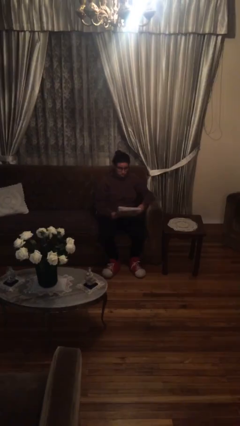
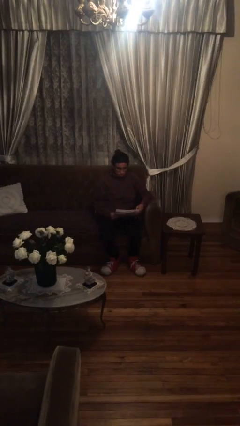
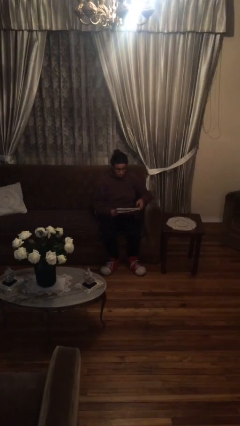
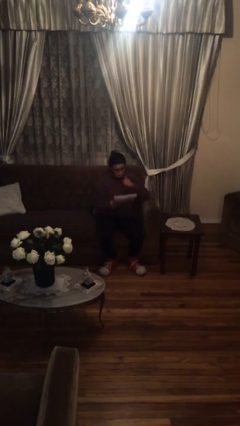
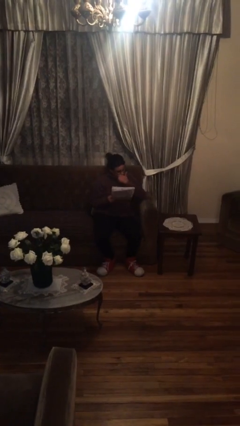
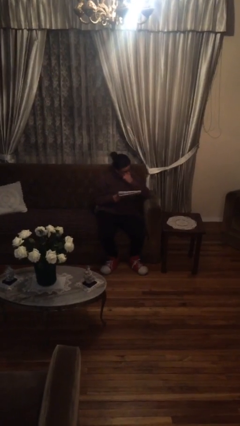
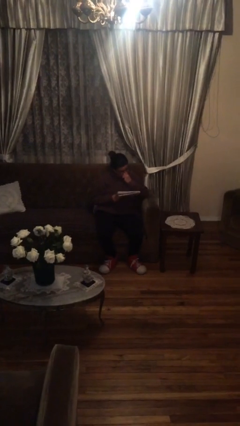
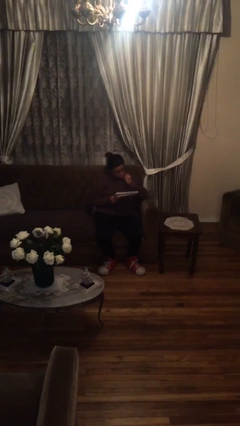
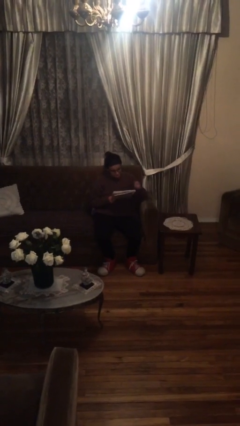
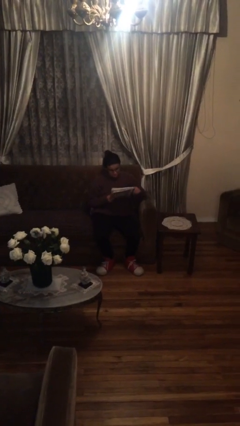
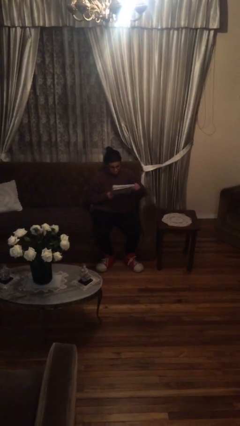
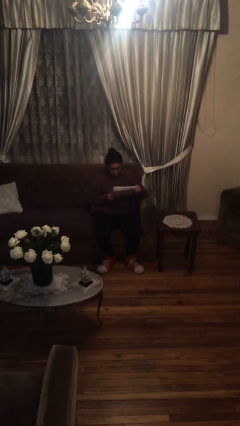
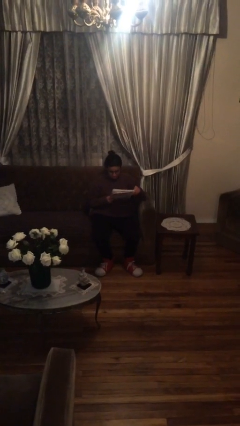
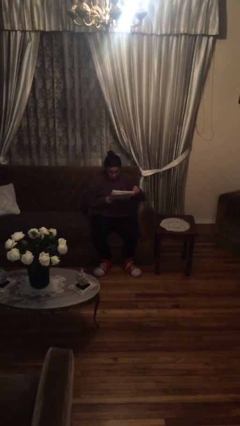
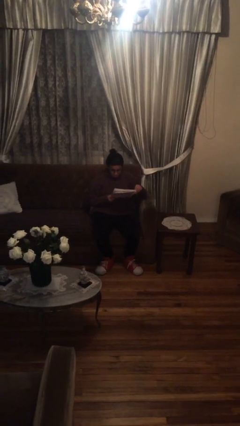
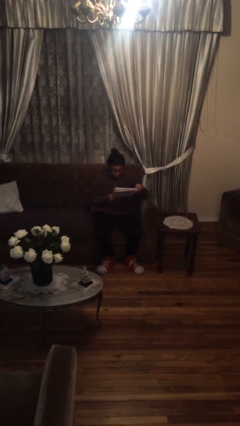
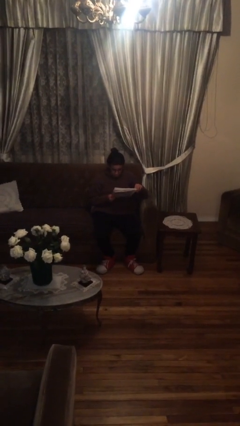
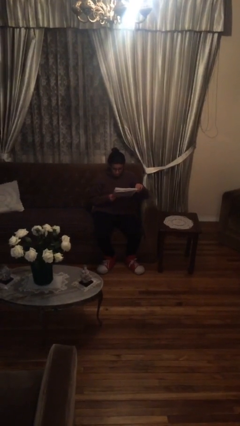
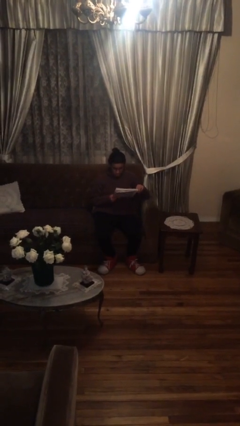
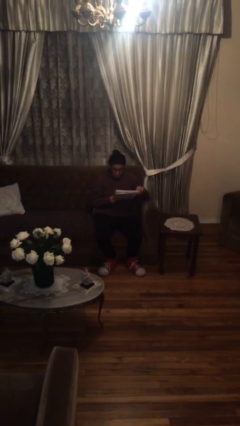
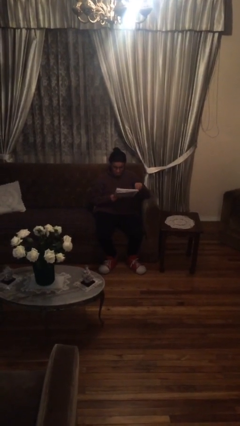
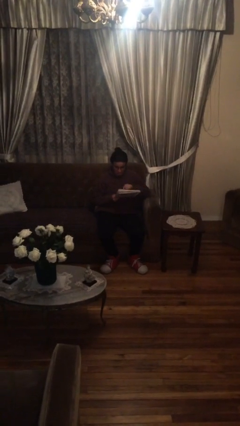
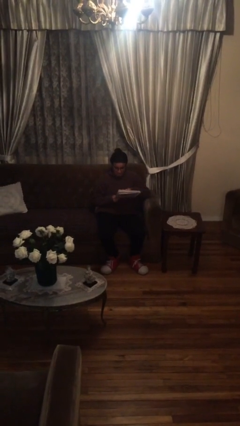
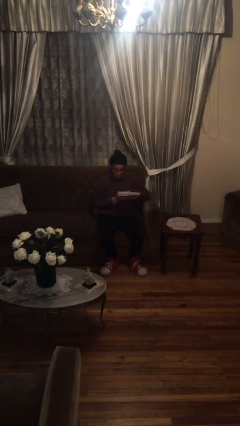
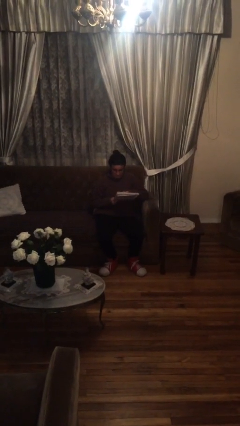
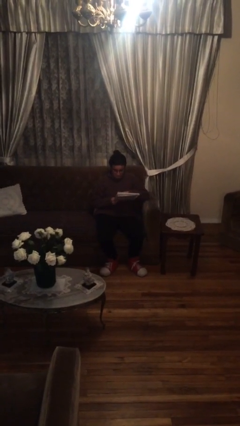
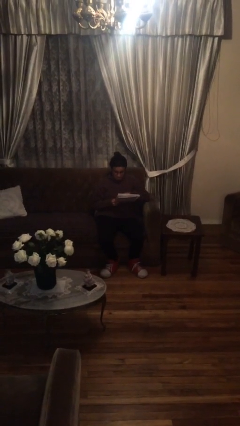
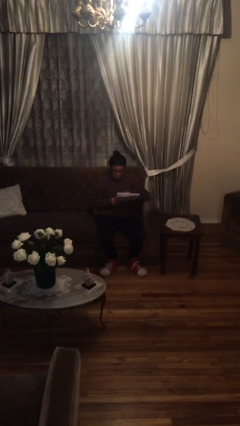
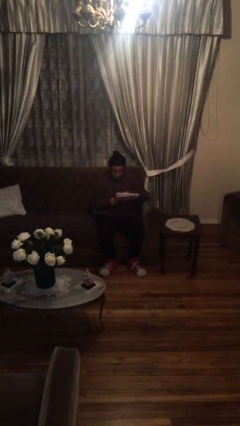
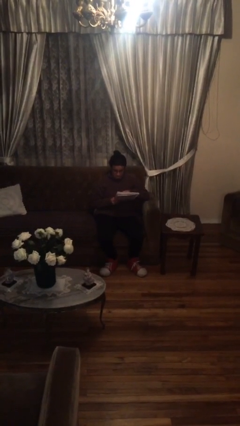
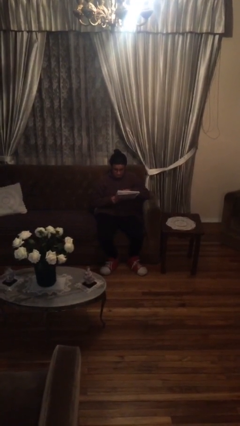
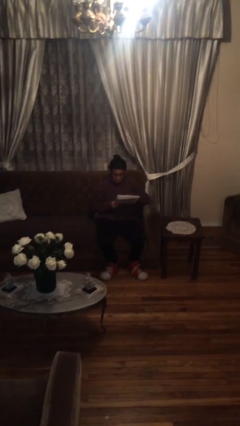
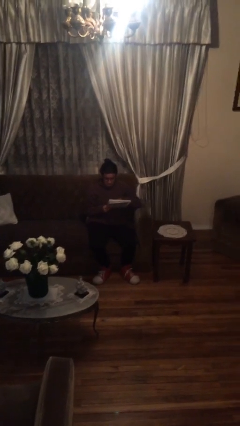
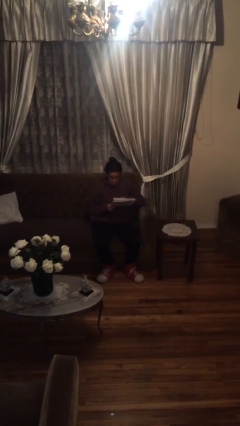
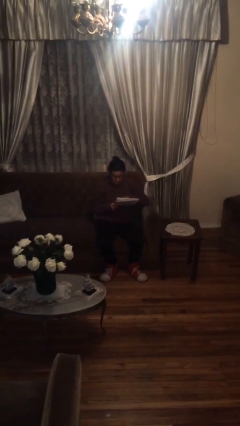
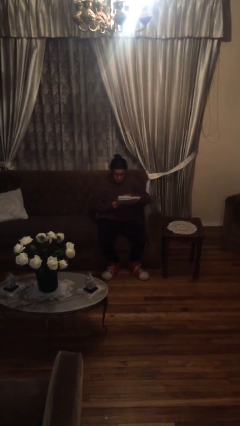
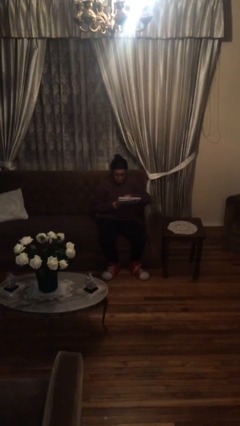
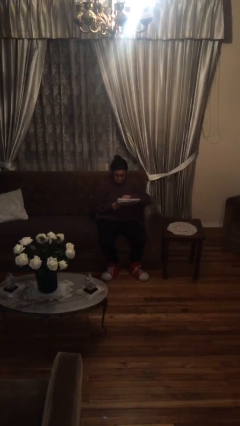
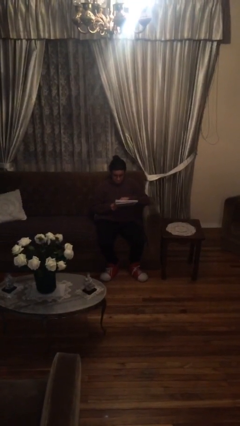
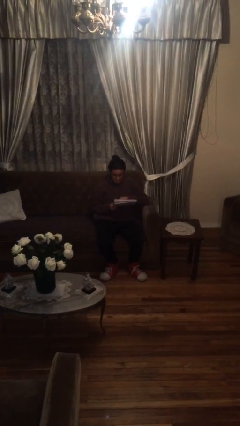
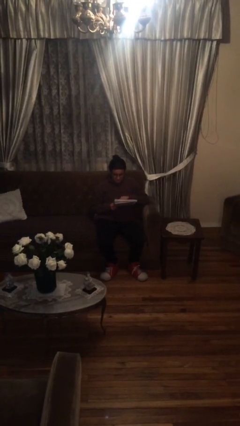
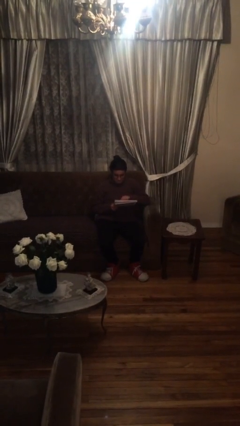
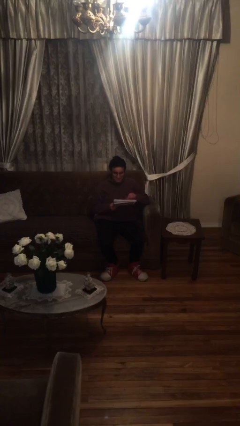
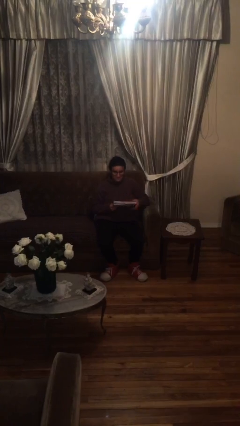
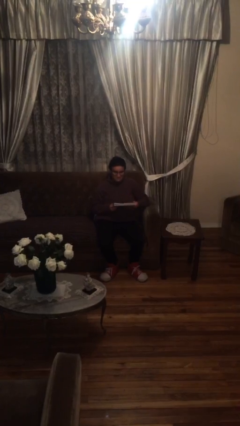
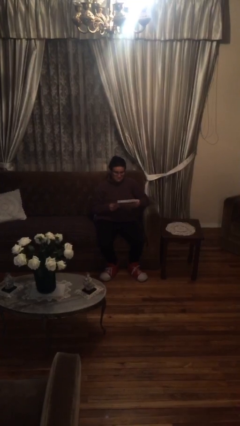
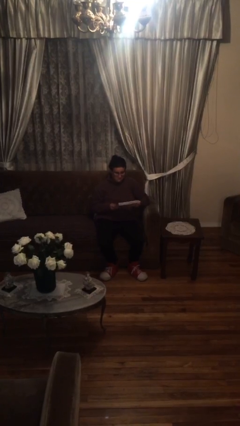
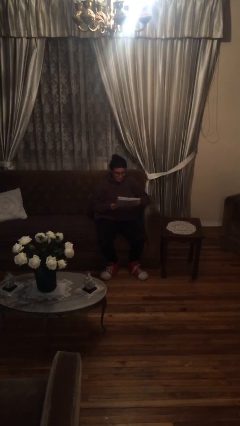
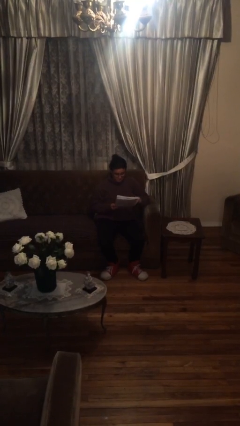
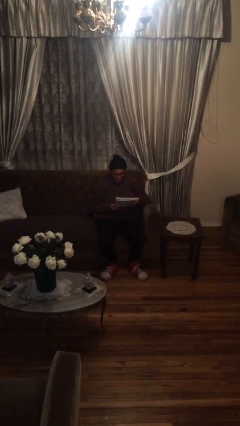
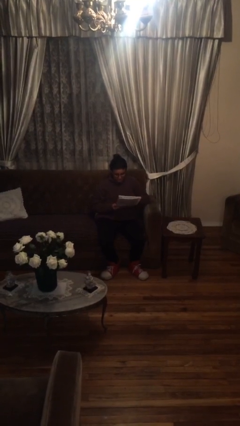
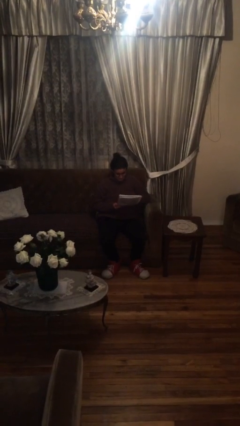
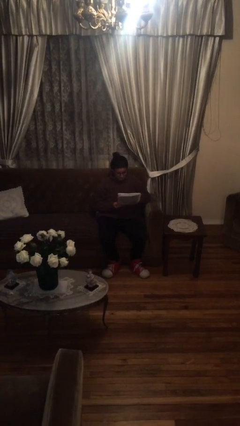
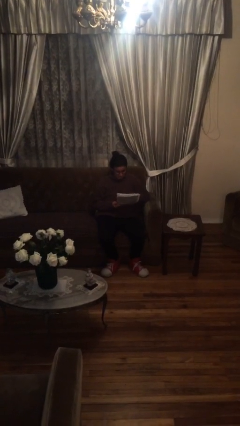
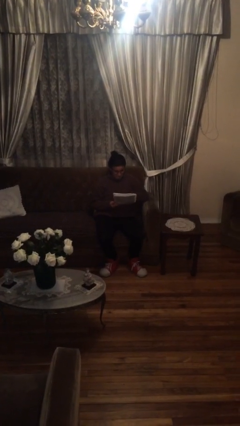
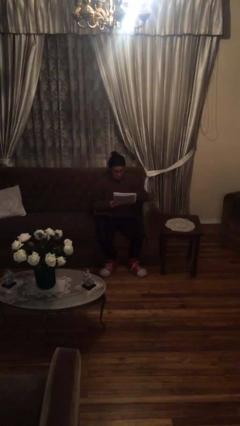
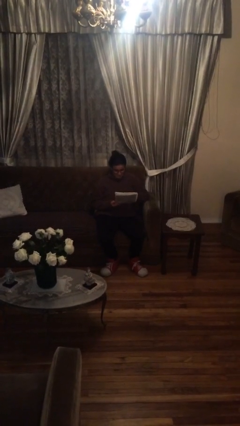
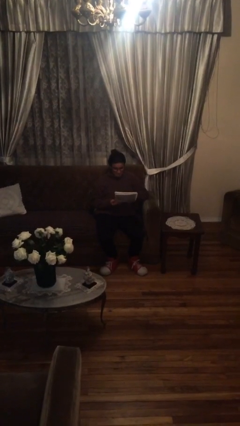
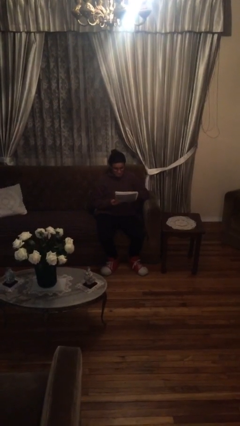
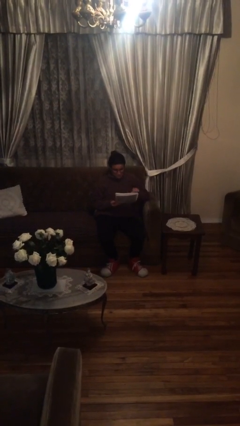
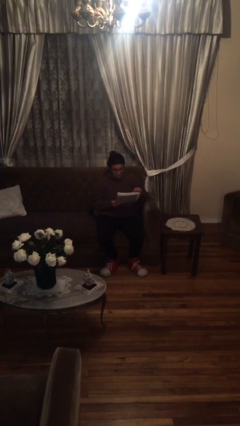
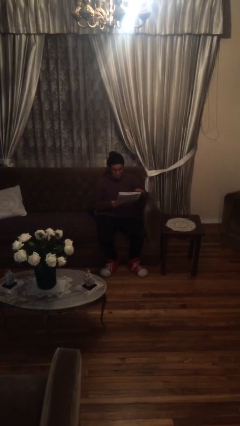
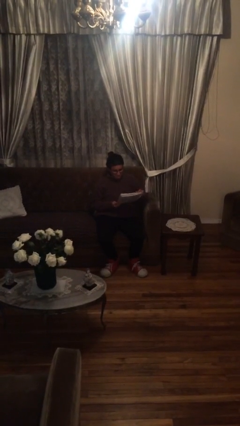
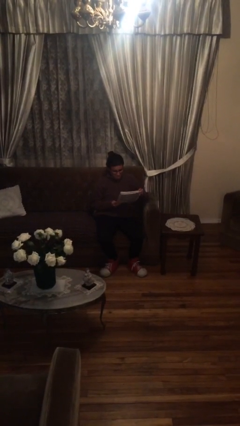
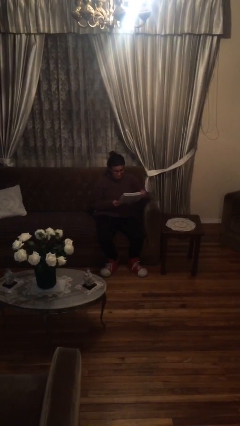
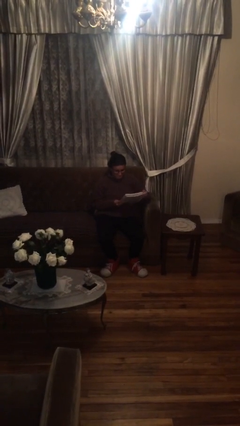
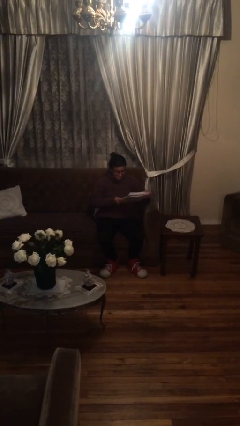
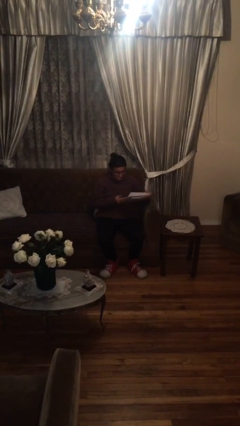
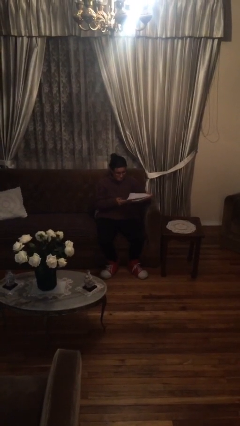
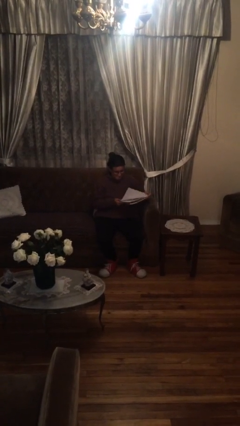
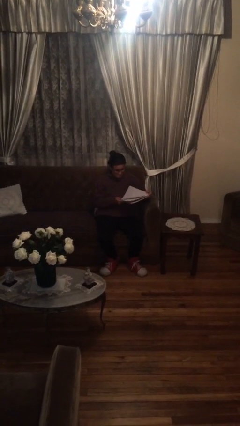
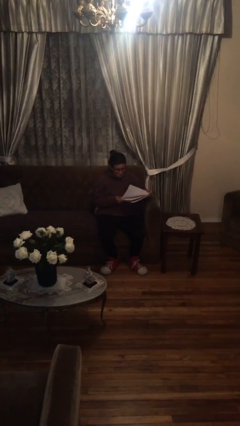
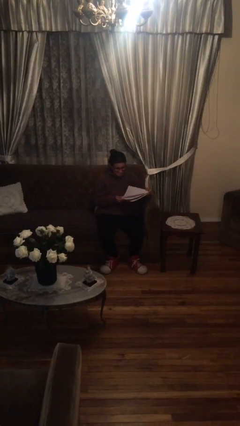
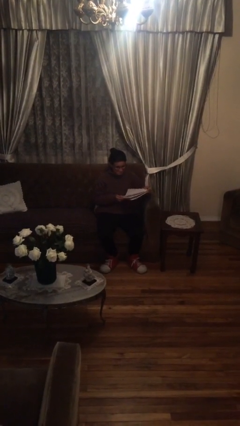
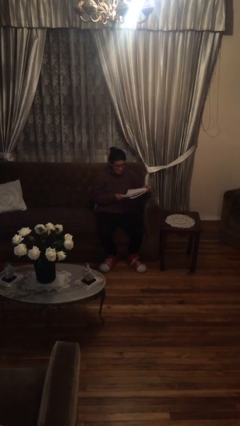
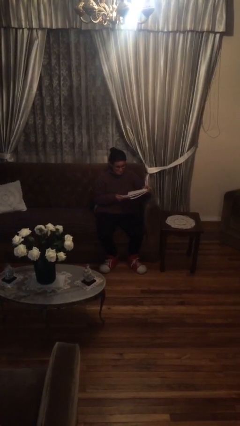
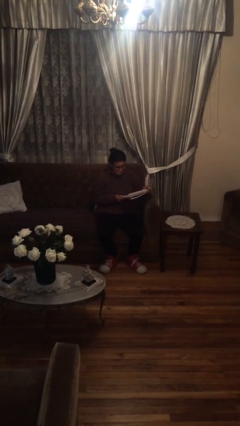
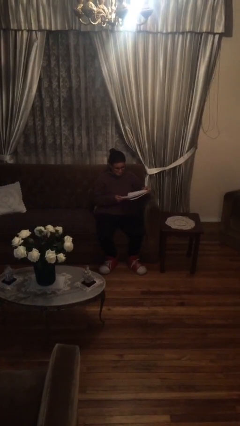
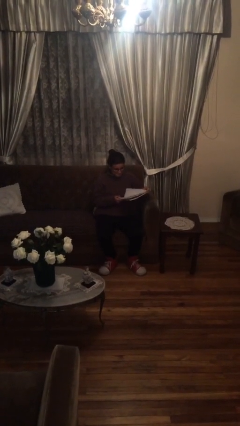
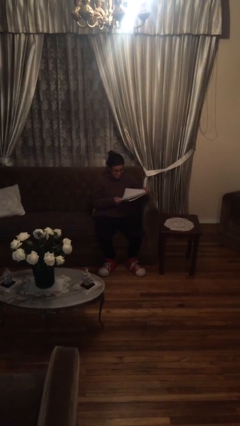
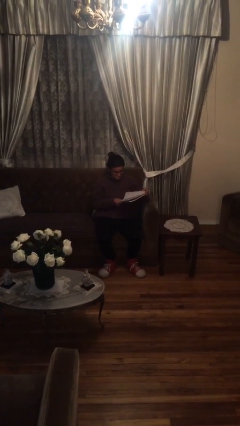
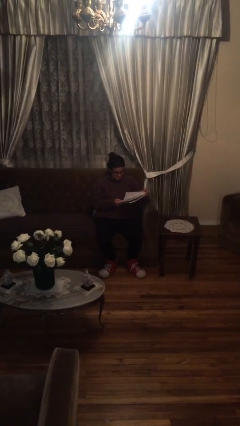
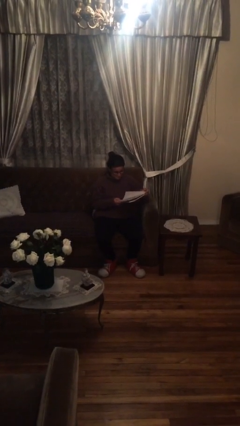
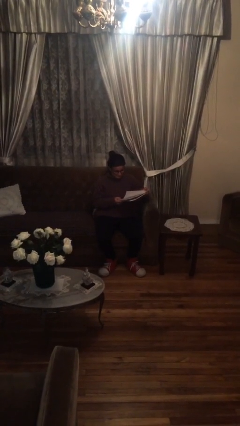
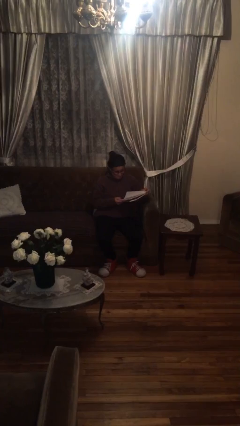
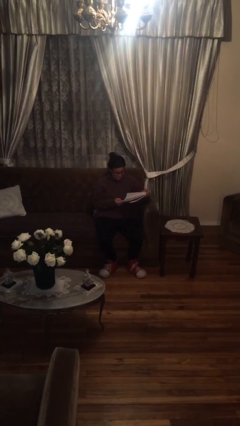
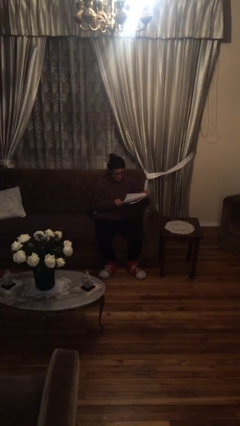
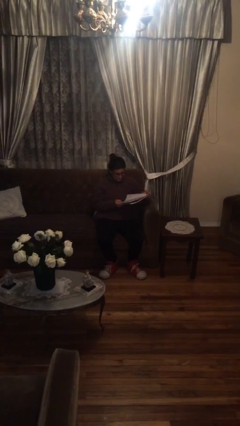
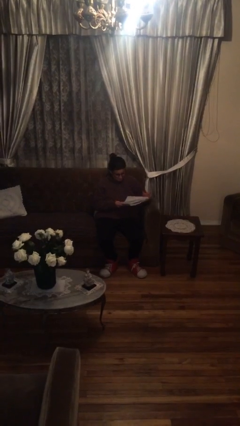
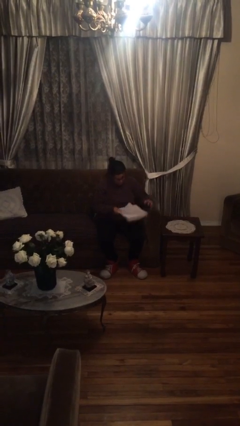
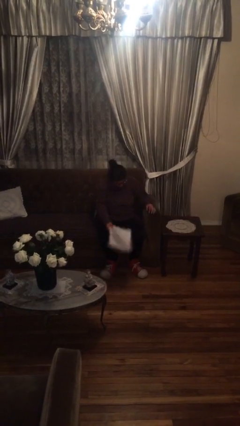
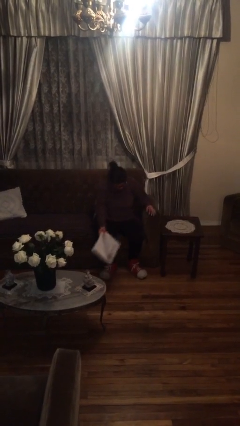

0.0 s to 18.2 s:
person reads document
